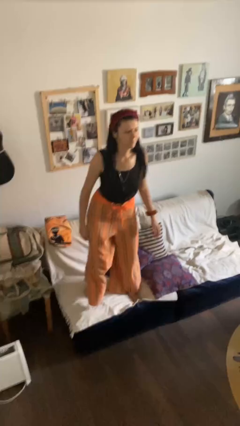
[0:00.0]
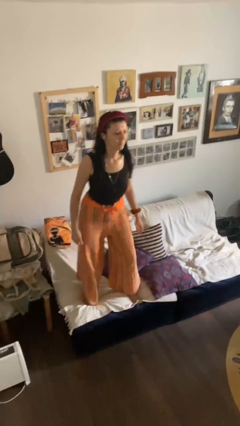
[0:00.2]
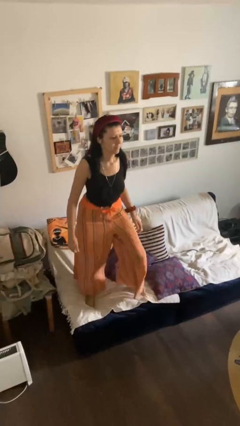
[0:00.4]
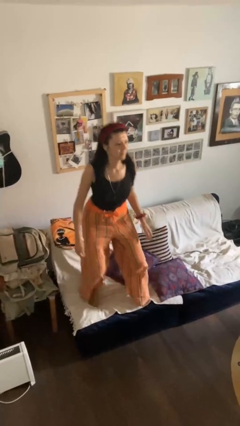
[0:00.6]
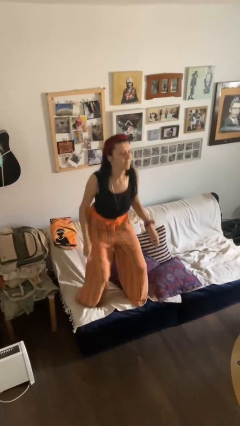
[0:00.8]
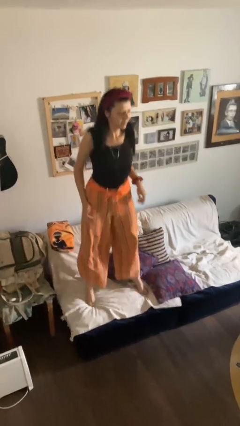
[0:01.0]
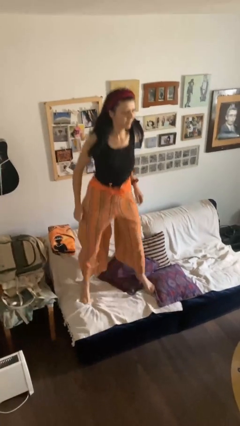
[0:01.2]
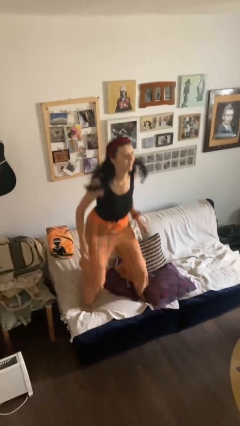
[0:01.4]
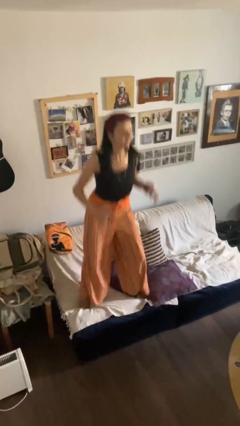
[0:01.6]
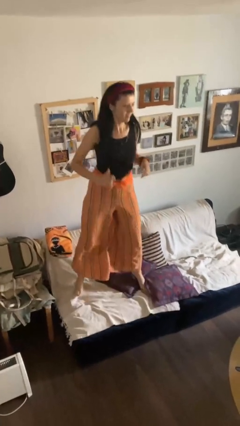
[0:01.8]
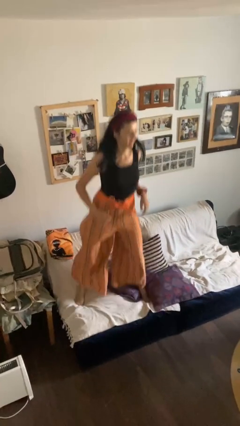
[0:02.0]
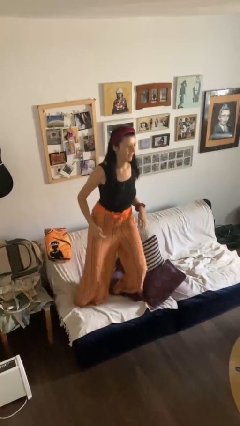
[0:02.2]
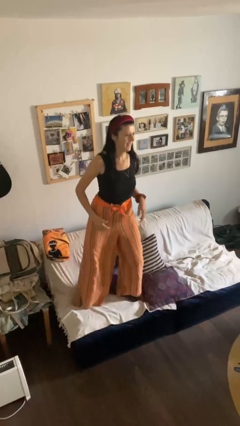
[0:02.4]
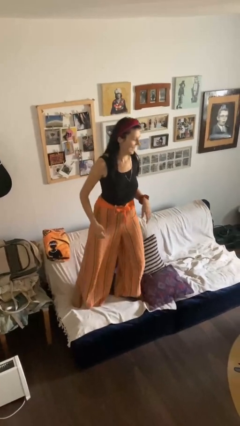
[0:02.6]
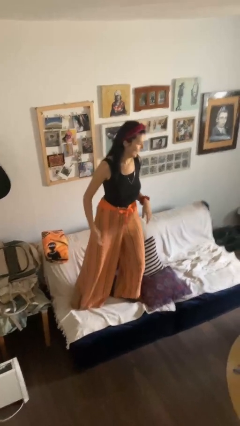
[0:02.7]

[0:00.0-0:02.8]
person jumps on couch

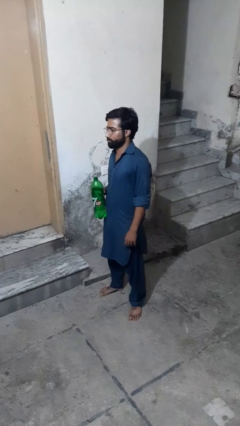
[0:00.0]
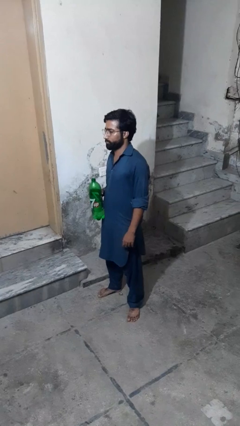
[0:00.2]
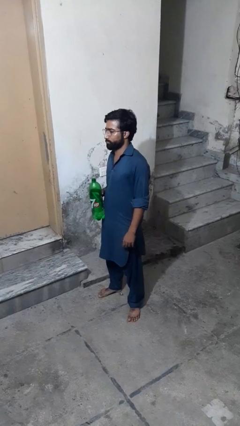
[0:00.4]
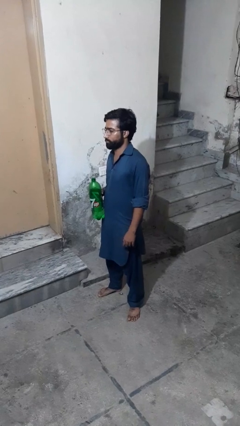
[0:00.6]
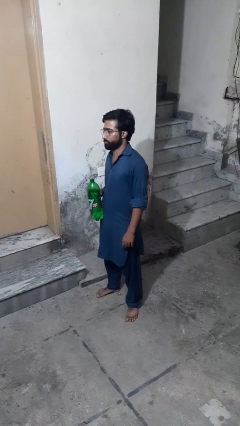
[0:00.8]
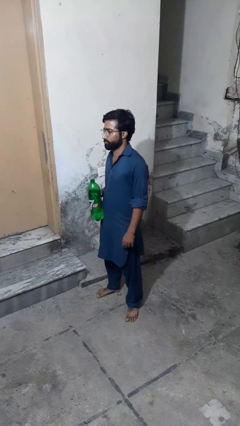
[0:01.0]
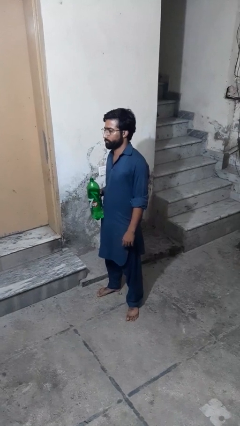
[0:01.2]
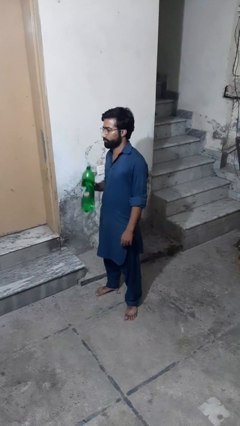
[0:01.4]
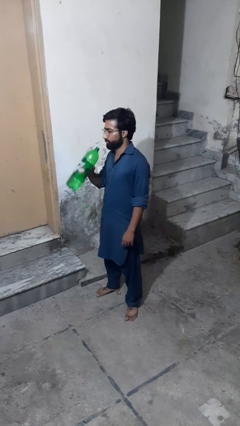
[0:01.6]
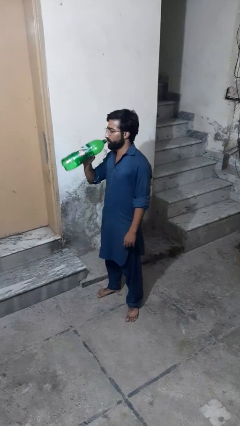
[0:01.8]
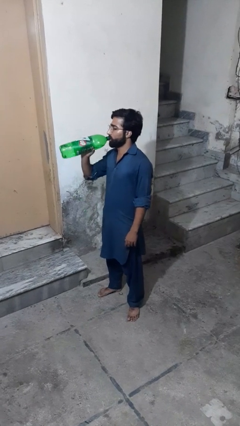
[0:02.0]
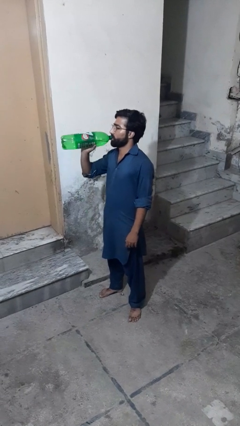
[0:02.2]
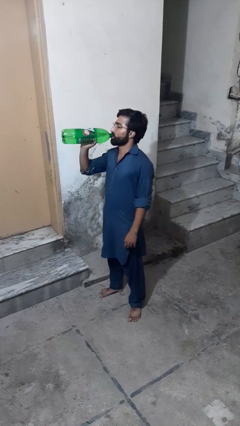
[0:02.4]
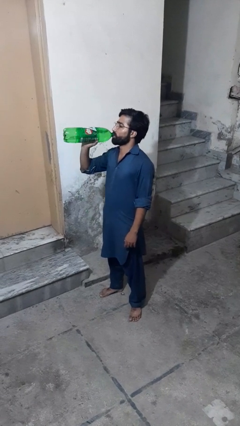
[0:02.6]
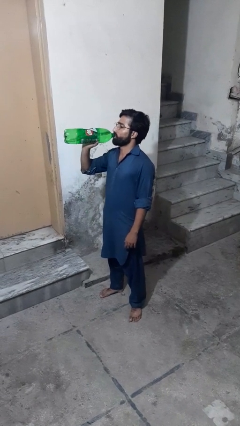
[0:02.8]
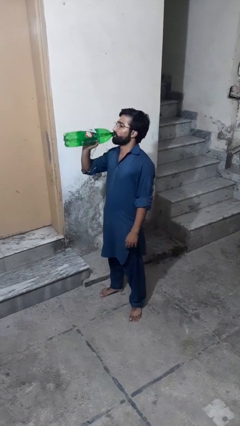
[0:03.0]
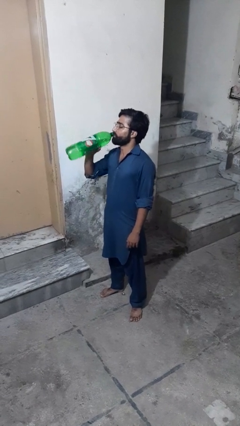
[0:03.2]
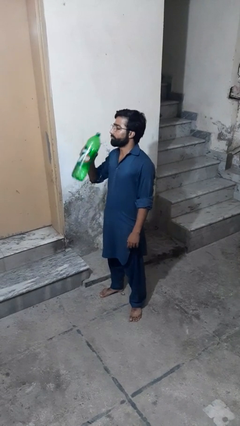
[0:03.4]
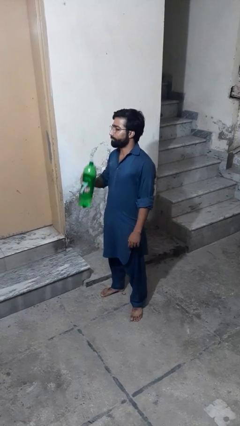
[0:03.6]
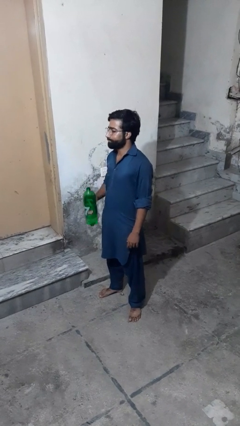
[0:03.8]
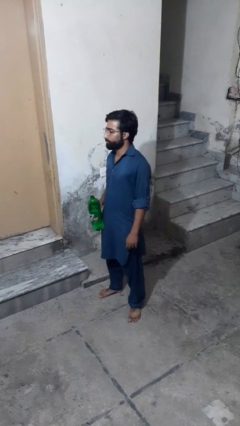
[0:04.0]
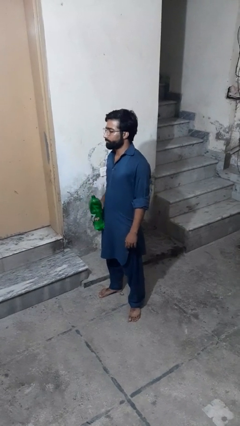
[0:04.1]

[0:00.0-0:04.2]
person drinks from bottle

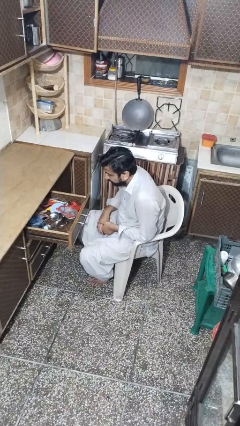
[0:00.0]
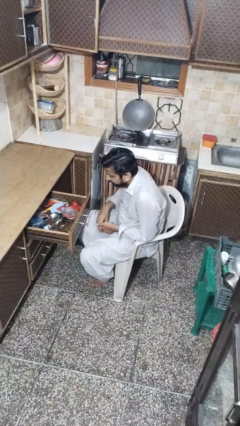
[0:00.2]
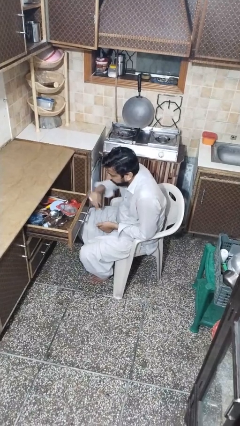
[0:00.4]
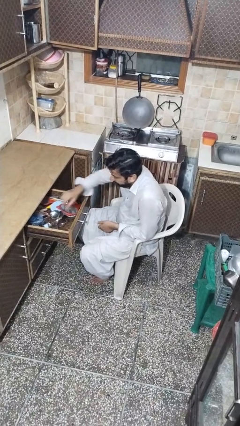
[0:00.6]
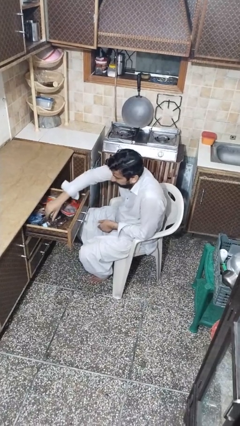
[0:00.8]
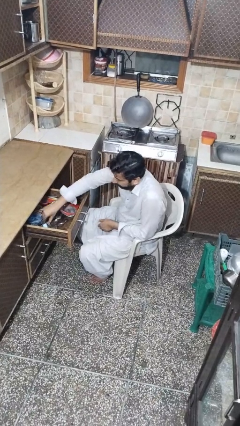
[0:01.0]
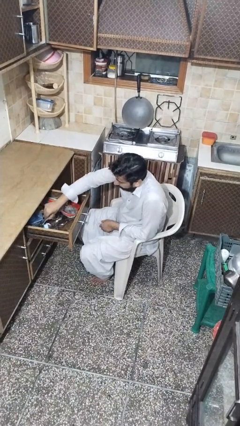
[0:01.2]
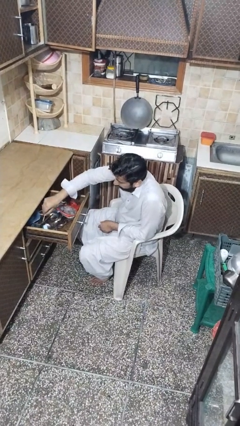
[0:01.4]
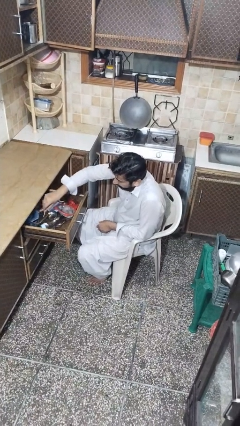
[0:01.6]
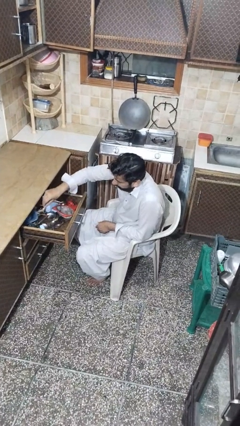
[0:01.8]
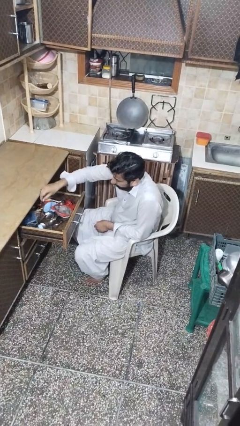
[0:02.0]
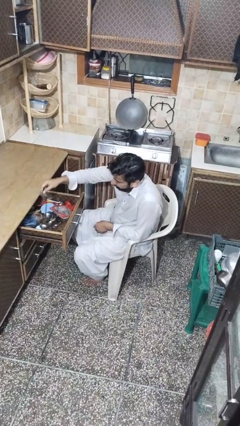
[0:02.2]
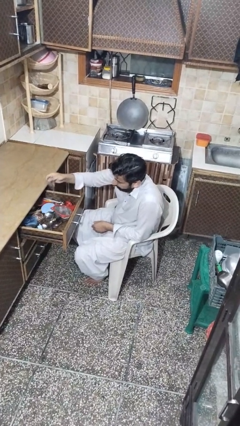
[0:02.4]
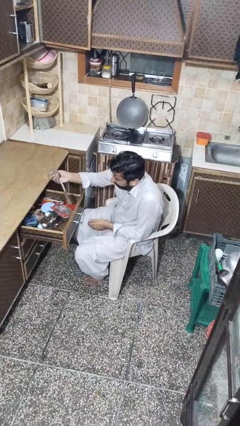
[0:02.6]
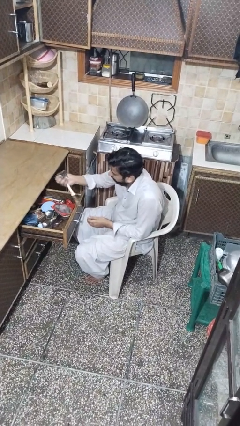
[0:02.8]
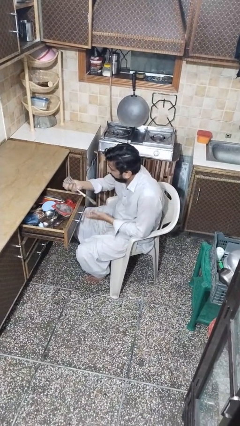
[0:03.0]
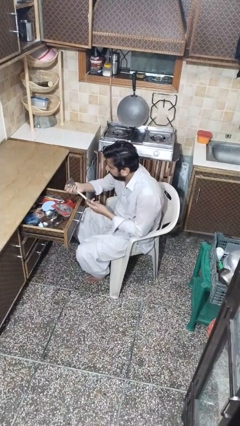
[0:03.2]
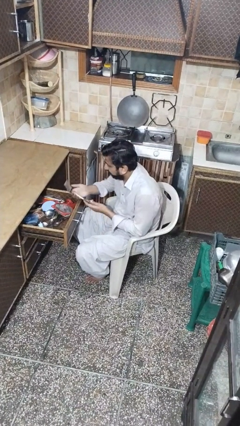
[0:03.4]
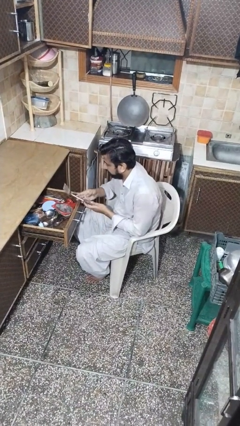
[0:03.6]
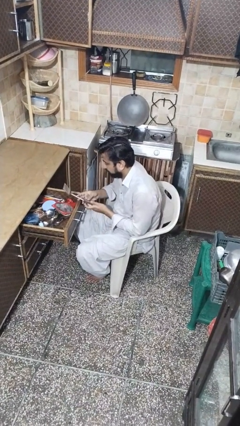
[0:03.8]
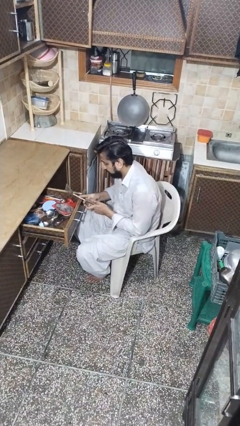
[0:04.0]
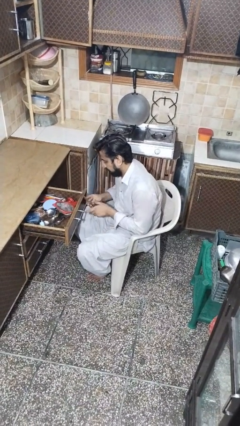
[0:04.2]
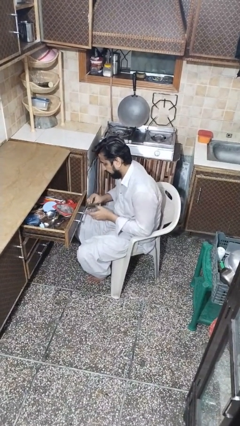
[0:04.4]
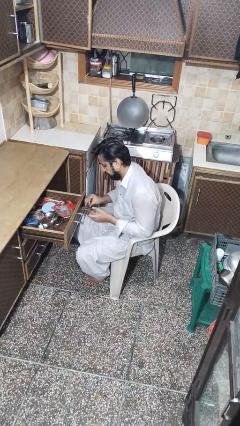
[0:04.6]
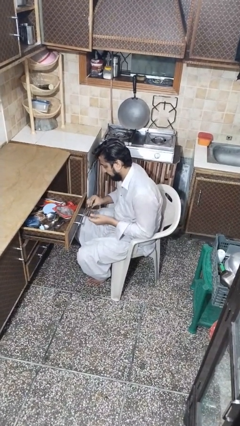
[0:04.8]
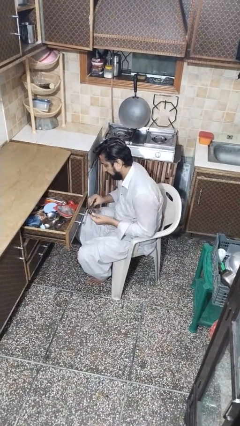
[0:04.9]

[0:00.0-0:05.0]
person takes object from kitchen drawer

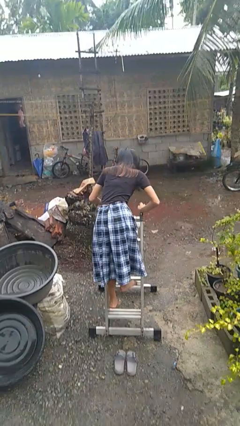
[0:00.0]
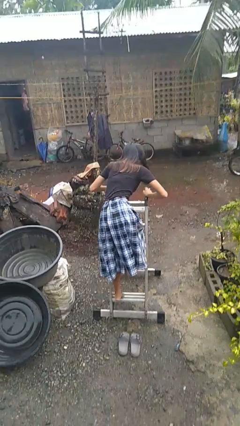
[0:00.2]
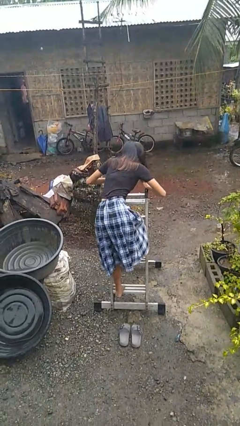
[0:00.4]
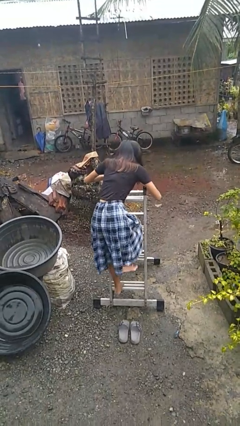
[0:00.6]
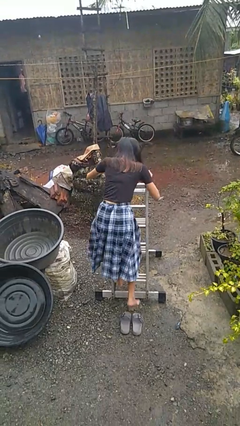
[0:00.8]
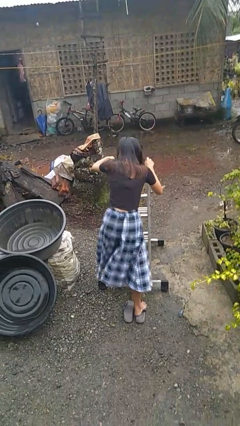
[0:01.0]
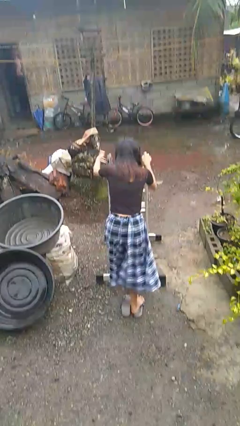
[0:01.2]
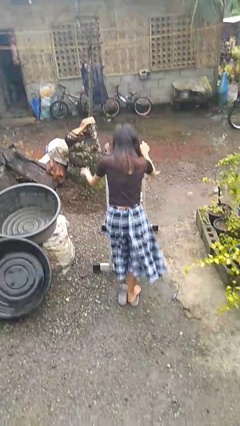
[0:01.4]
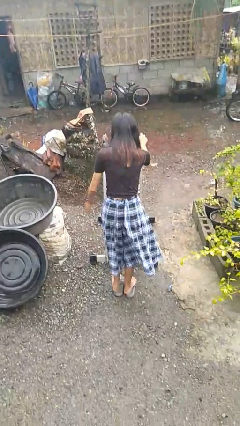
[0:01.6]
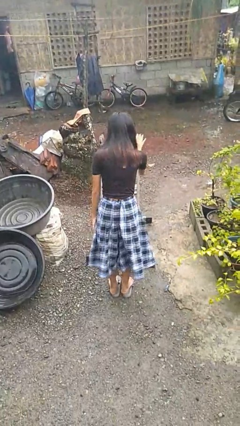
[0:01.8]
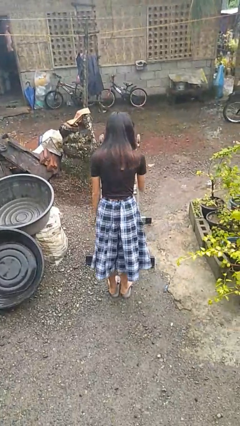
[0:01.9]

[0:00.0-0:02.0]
person climbs down ladder

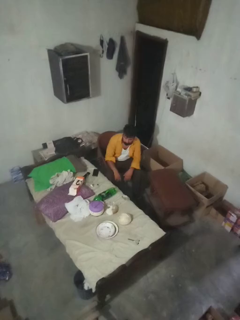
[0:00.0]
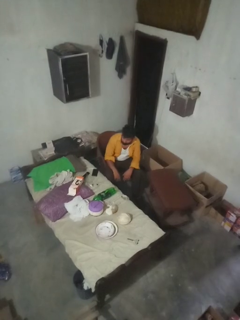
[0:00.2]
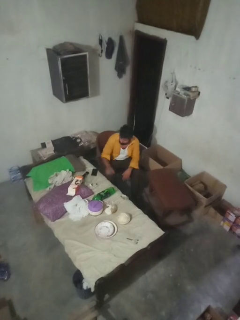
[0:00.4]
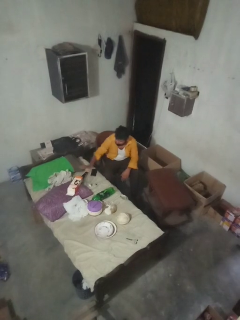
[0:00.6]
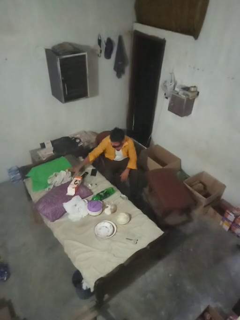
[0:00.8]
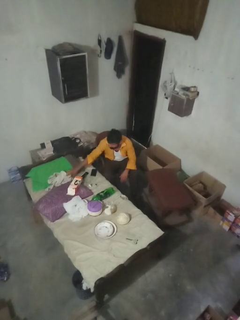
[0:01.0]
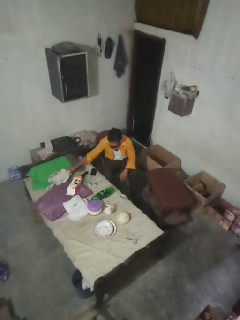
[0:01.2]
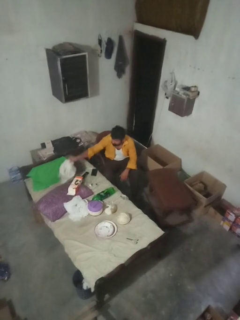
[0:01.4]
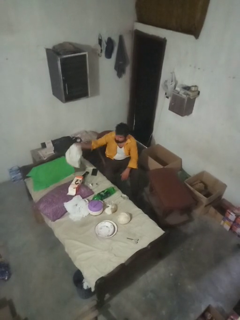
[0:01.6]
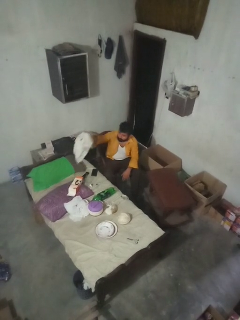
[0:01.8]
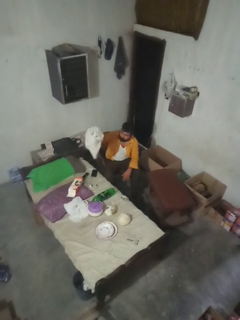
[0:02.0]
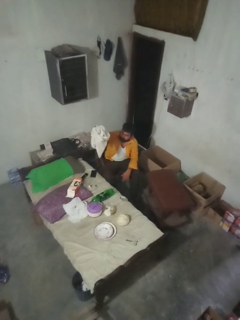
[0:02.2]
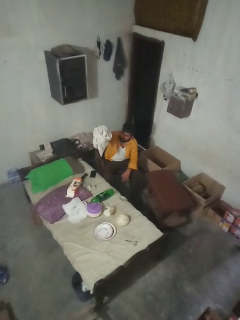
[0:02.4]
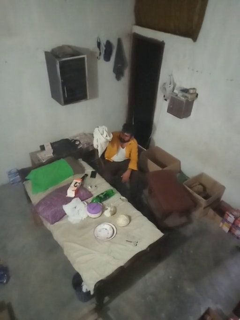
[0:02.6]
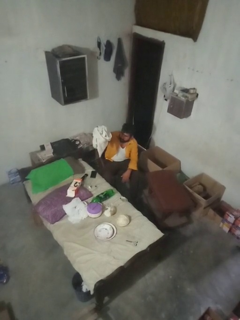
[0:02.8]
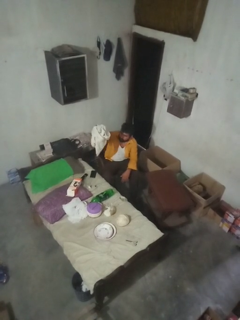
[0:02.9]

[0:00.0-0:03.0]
person picks up object from bed

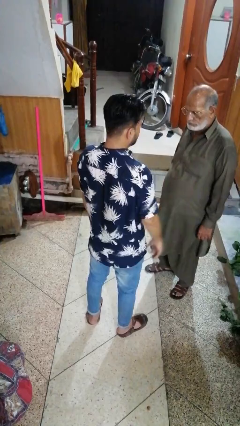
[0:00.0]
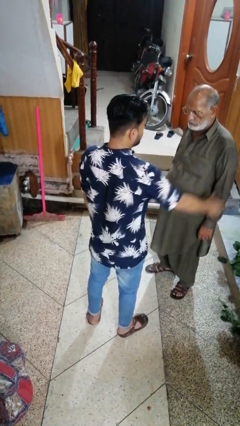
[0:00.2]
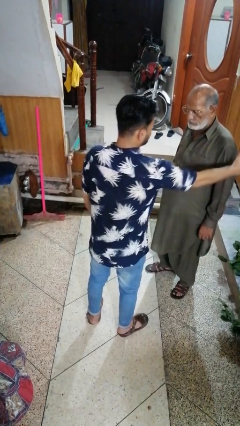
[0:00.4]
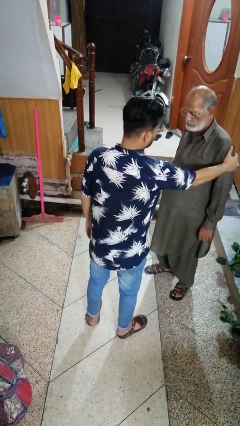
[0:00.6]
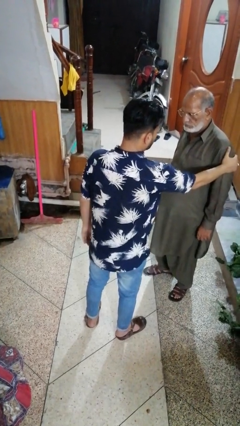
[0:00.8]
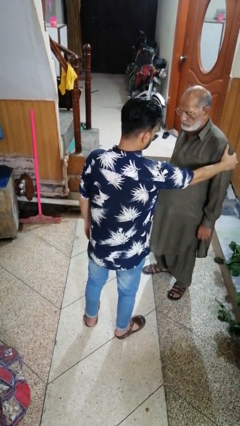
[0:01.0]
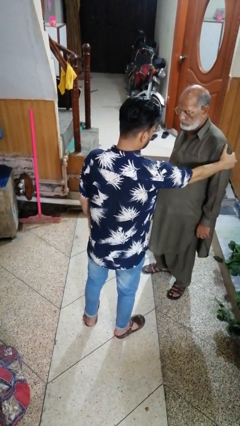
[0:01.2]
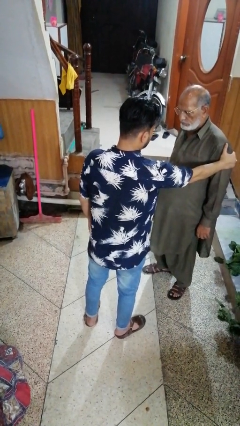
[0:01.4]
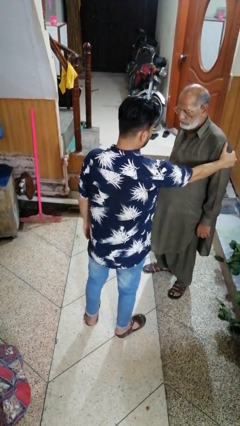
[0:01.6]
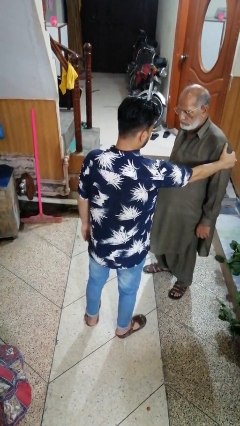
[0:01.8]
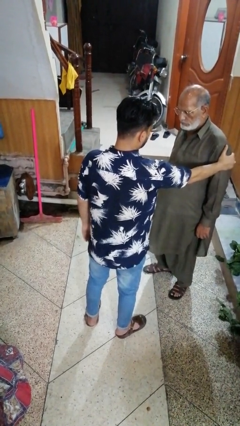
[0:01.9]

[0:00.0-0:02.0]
person grabs person by bicep
